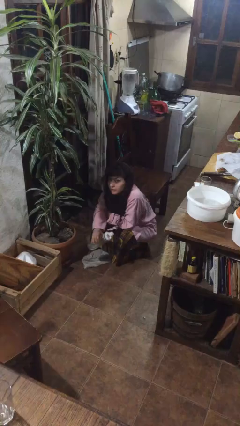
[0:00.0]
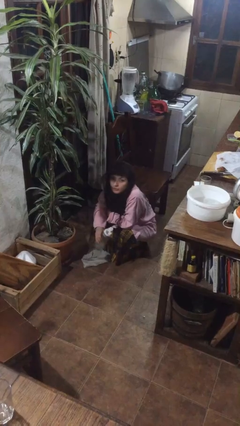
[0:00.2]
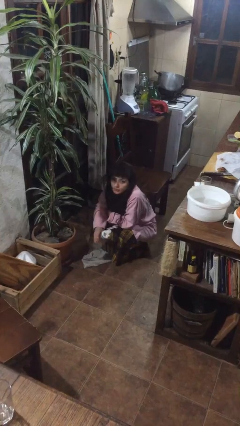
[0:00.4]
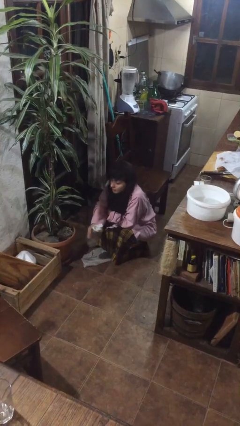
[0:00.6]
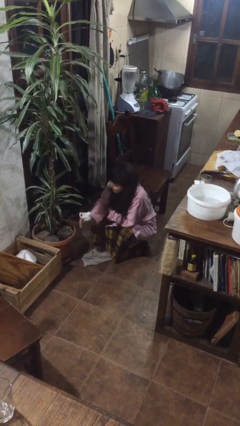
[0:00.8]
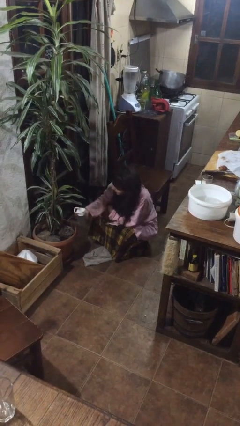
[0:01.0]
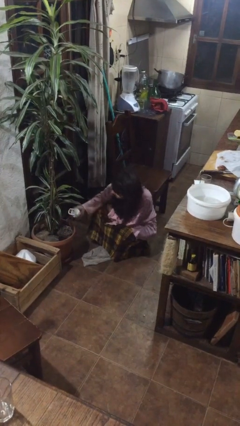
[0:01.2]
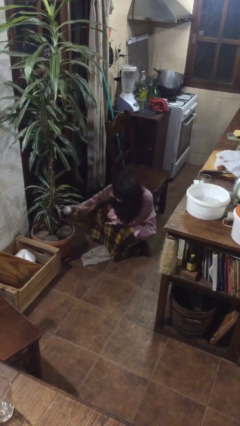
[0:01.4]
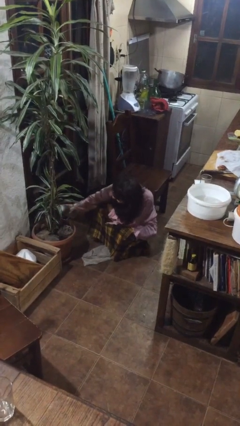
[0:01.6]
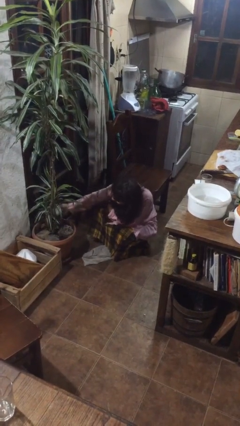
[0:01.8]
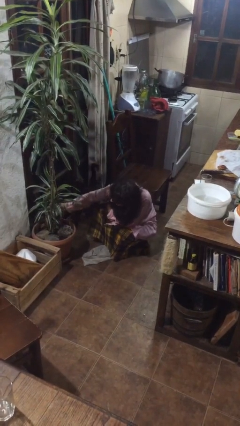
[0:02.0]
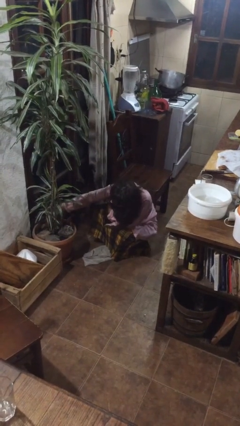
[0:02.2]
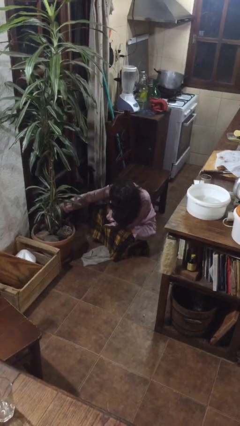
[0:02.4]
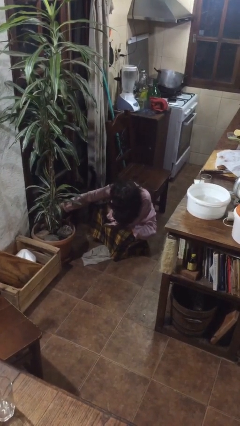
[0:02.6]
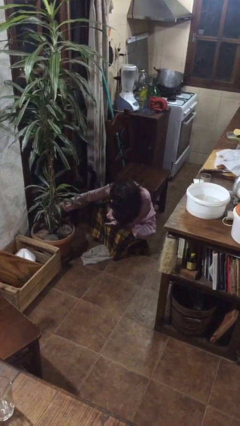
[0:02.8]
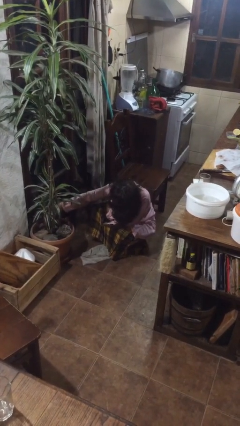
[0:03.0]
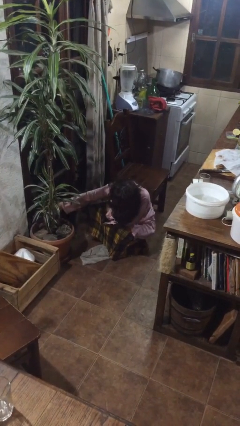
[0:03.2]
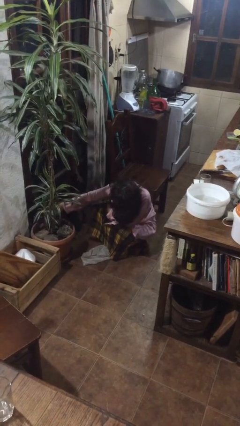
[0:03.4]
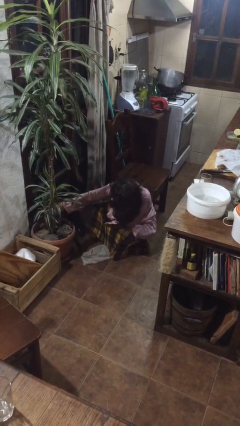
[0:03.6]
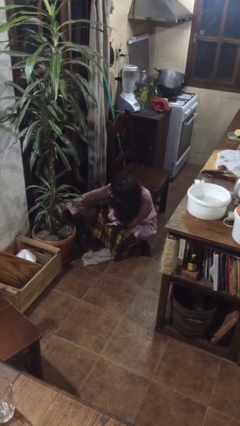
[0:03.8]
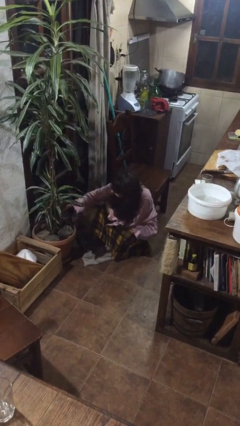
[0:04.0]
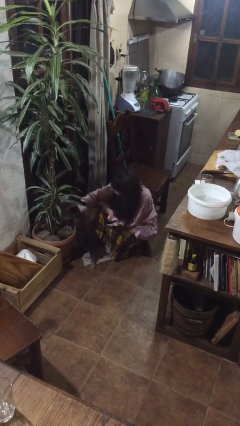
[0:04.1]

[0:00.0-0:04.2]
person waters houseplant

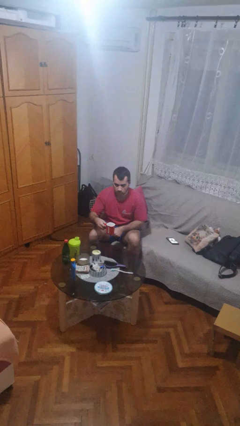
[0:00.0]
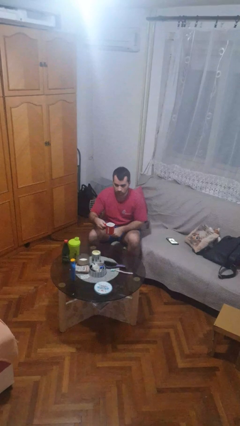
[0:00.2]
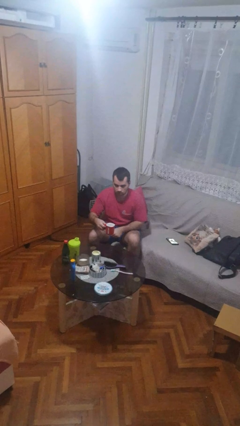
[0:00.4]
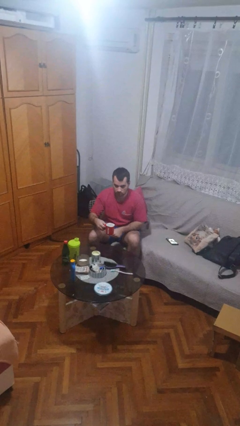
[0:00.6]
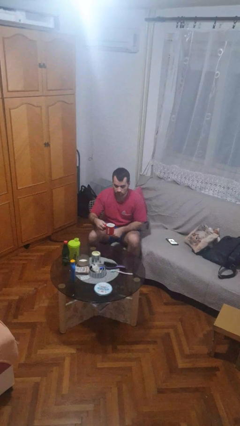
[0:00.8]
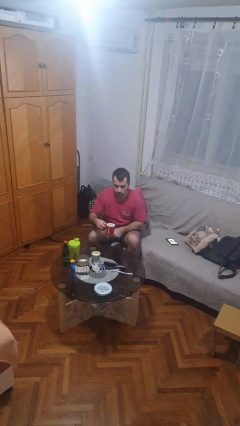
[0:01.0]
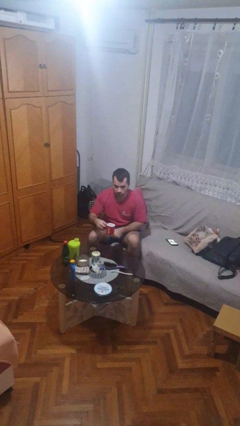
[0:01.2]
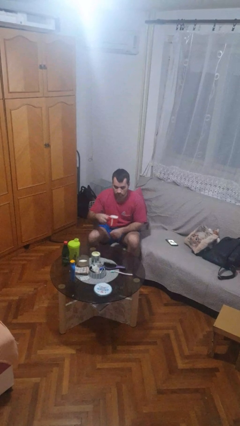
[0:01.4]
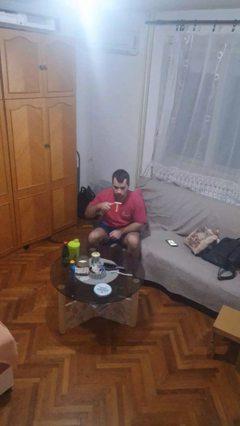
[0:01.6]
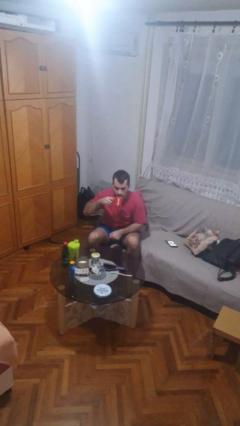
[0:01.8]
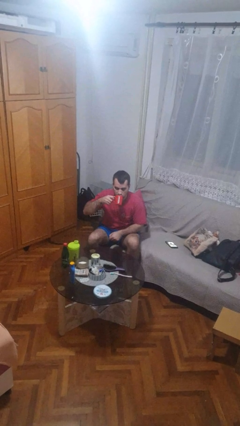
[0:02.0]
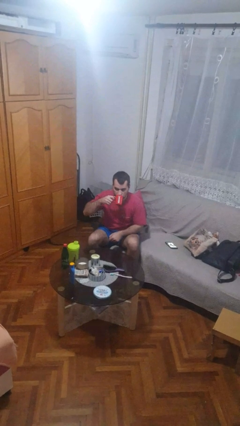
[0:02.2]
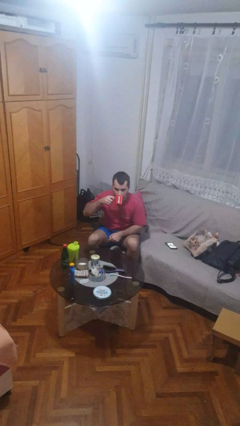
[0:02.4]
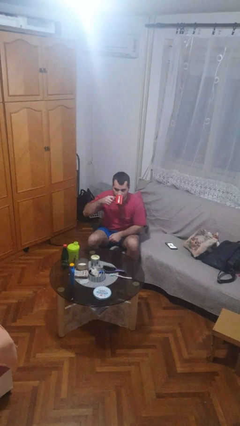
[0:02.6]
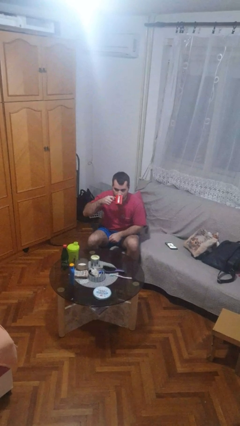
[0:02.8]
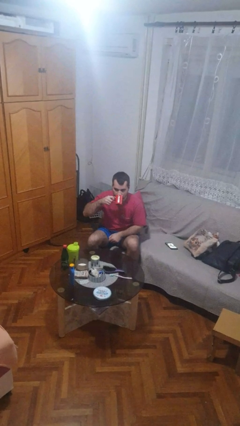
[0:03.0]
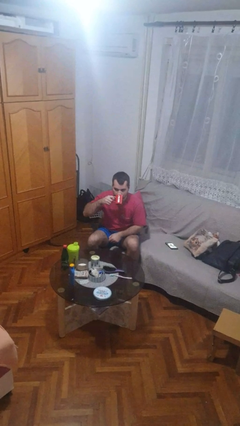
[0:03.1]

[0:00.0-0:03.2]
person drinks from mug

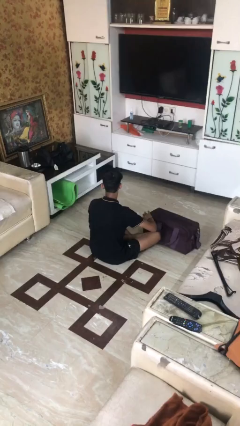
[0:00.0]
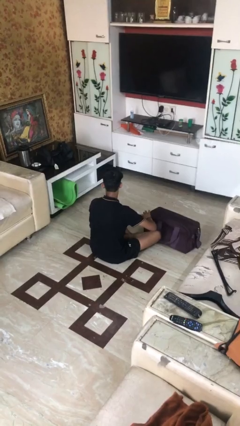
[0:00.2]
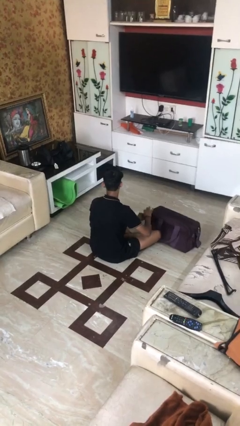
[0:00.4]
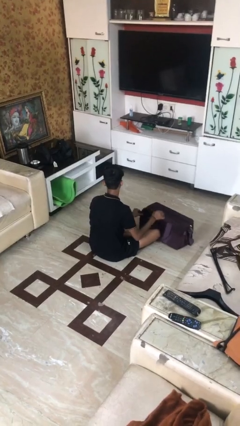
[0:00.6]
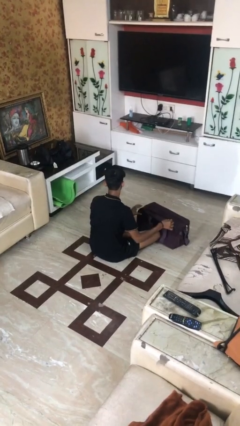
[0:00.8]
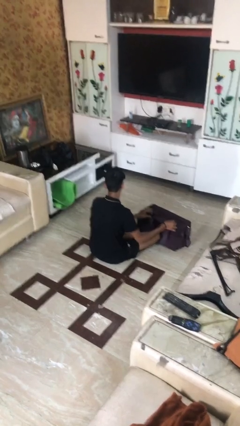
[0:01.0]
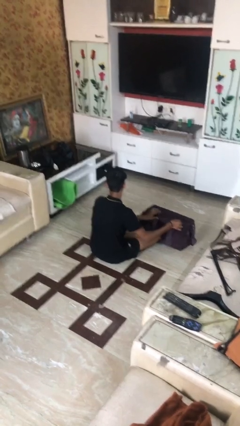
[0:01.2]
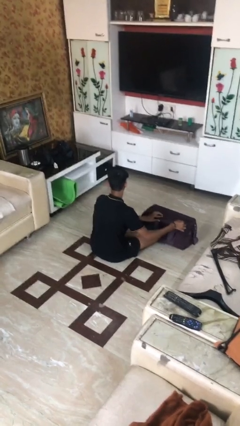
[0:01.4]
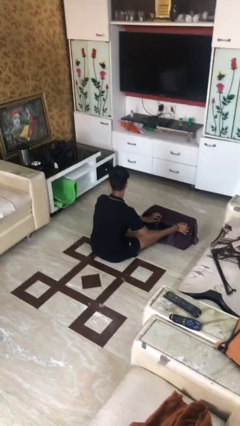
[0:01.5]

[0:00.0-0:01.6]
person opens suitcase

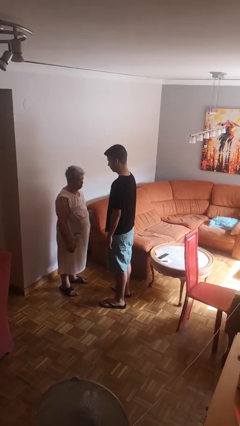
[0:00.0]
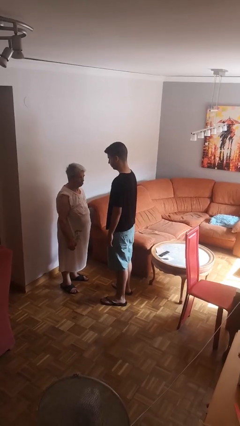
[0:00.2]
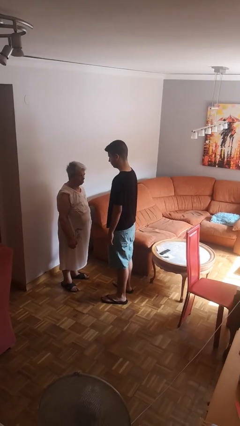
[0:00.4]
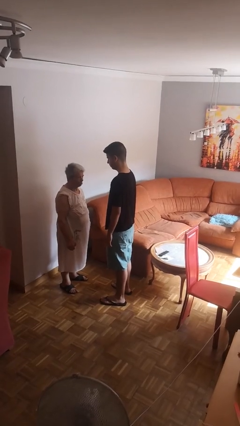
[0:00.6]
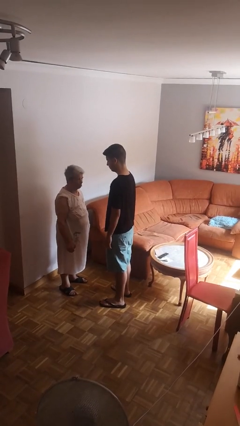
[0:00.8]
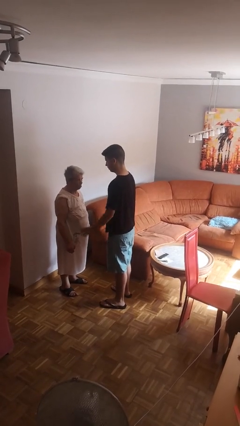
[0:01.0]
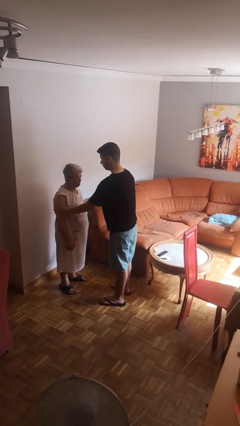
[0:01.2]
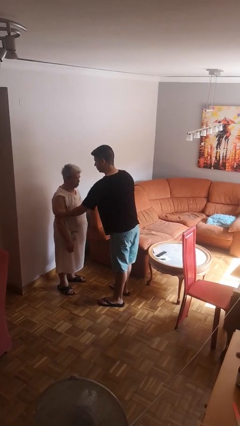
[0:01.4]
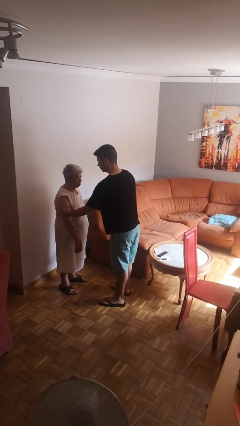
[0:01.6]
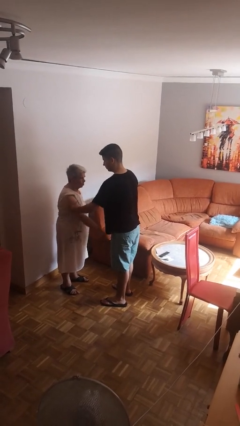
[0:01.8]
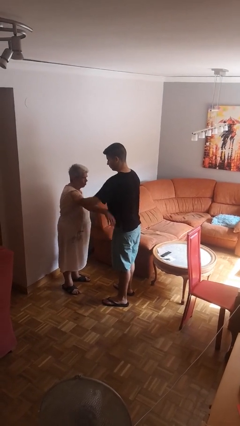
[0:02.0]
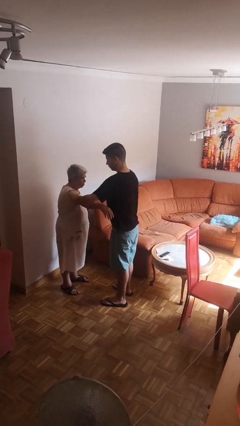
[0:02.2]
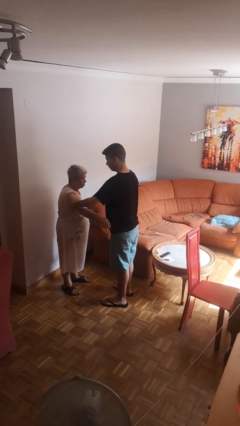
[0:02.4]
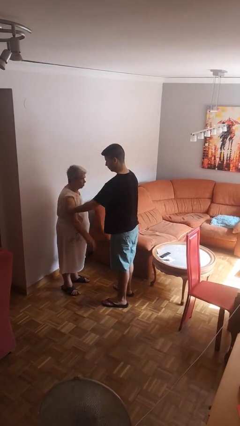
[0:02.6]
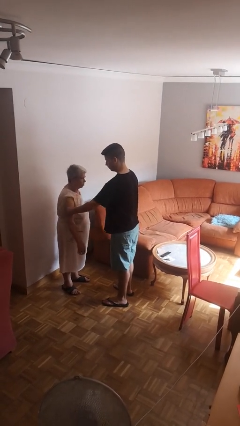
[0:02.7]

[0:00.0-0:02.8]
person grabs person by bicep

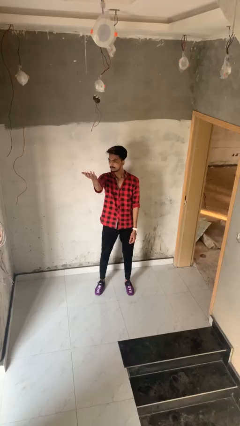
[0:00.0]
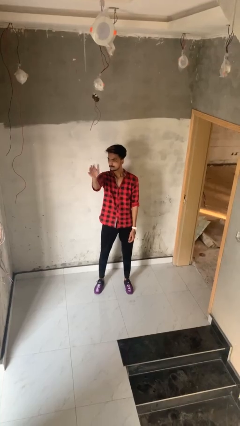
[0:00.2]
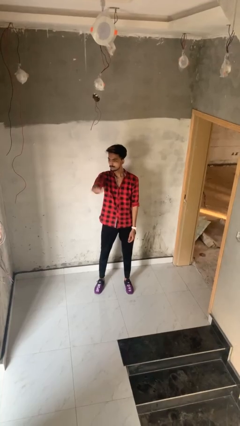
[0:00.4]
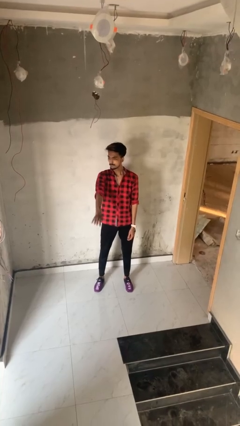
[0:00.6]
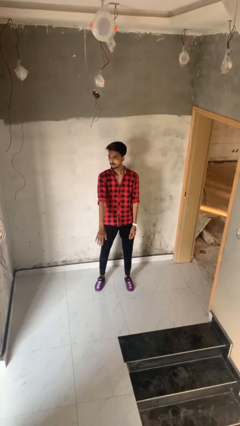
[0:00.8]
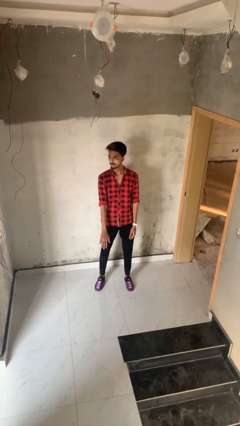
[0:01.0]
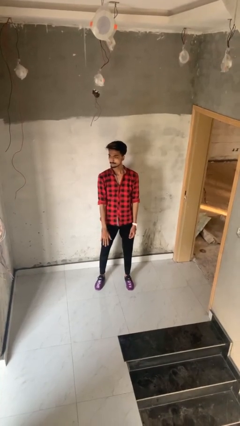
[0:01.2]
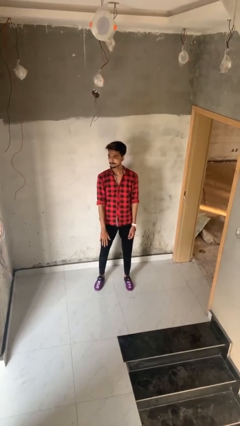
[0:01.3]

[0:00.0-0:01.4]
person gestures swipe down

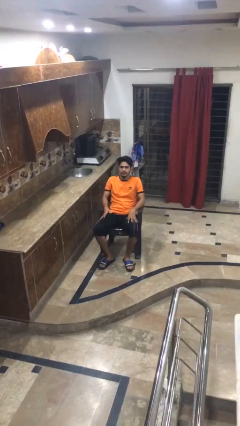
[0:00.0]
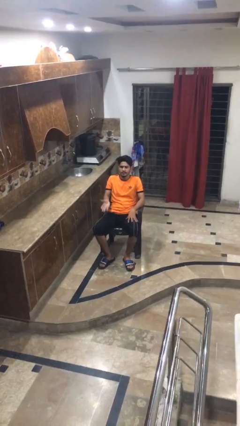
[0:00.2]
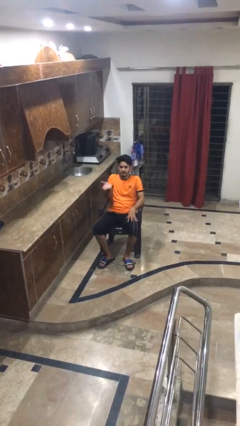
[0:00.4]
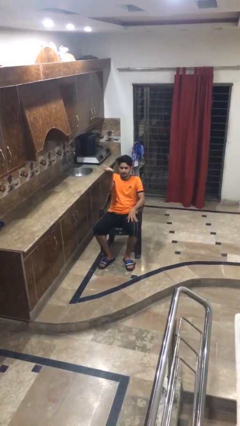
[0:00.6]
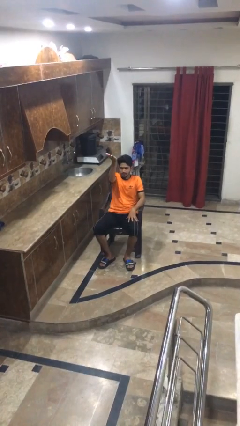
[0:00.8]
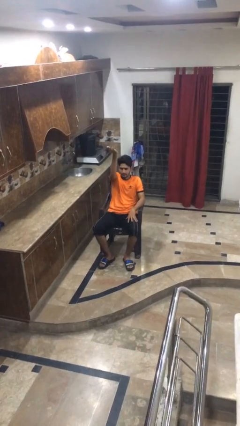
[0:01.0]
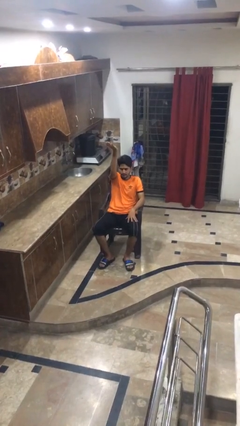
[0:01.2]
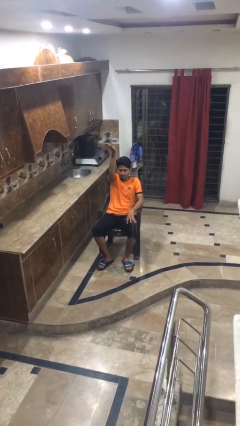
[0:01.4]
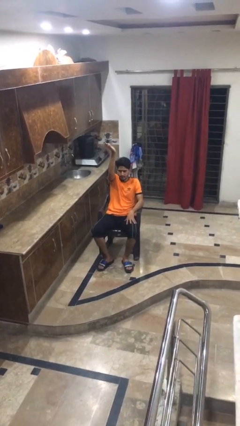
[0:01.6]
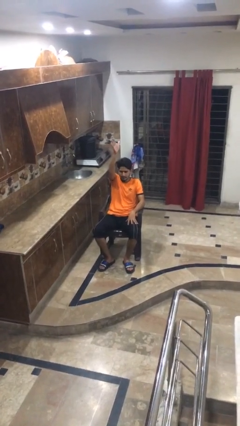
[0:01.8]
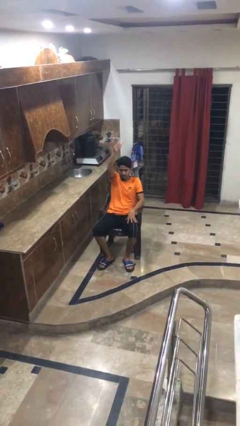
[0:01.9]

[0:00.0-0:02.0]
person gestures swipe up

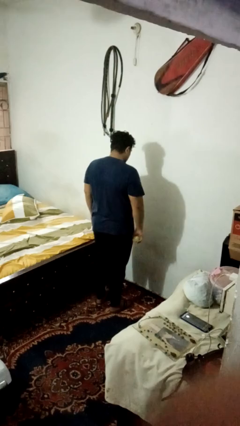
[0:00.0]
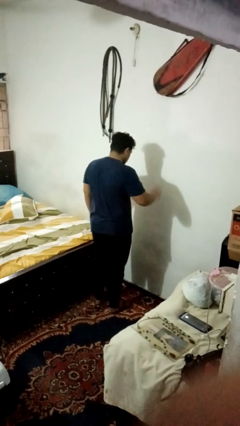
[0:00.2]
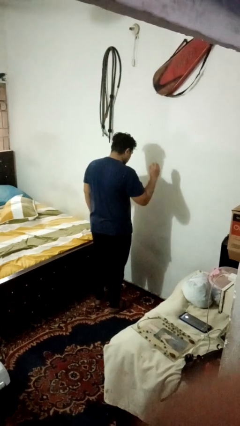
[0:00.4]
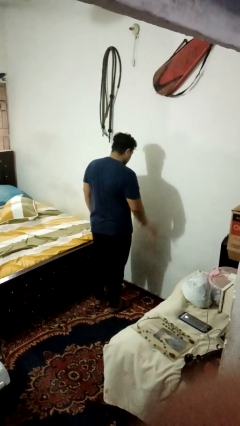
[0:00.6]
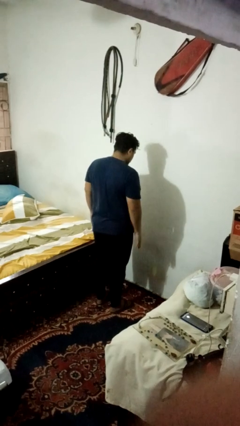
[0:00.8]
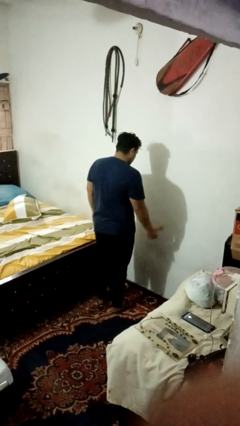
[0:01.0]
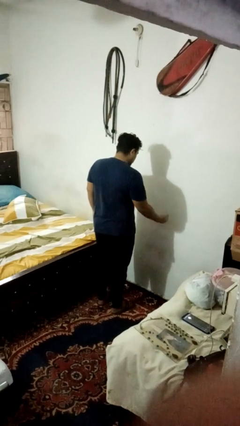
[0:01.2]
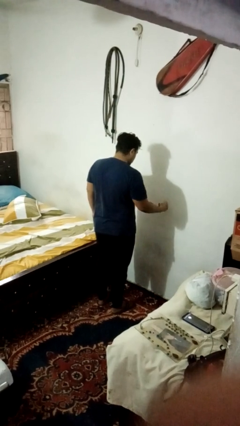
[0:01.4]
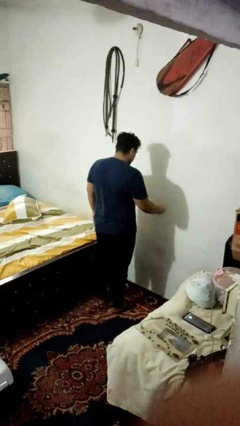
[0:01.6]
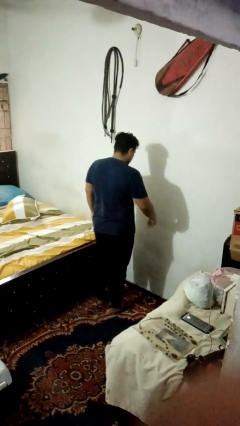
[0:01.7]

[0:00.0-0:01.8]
person bounces ball on floor
